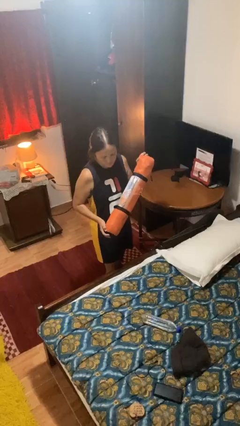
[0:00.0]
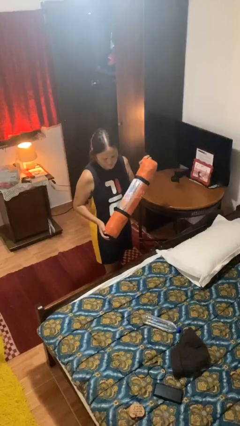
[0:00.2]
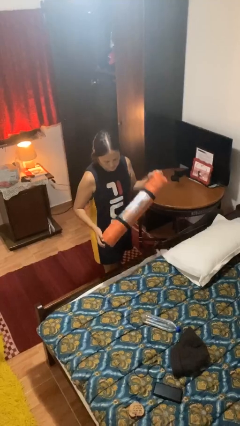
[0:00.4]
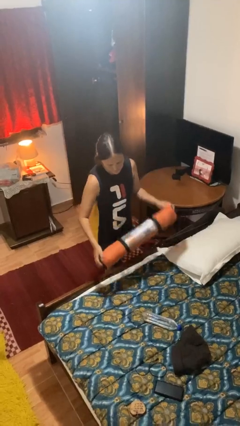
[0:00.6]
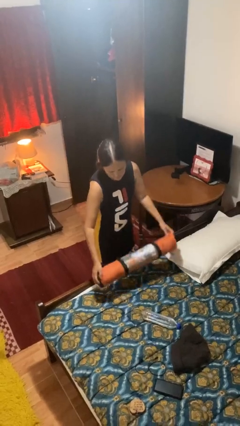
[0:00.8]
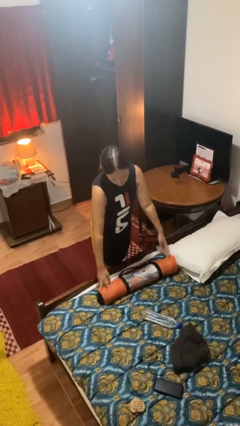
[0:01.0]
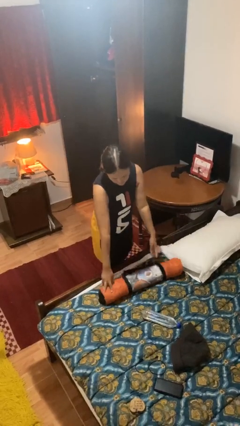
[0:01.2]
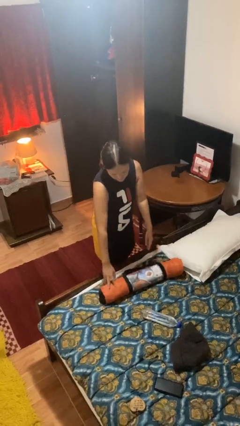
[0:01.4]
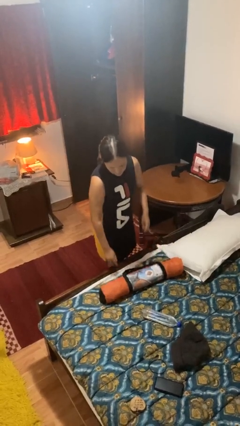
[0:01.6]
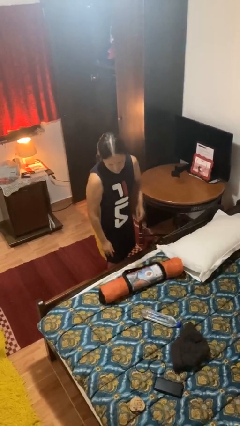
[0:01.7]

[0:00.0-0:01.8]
person puts down object on bed

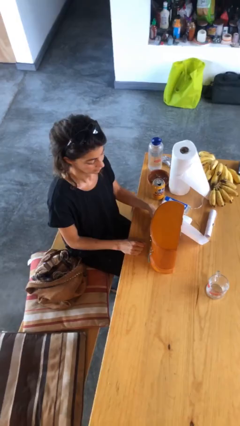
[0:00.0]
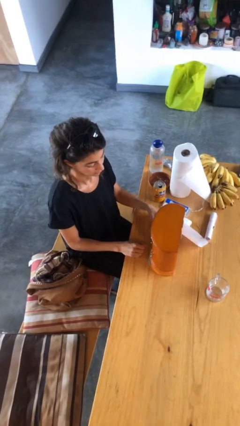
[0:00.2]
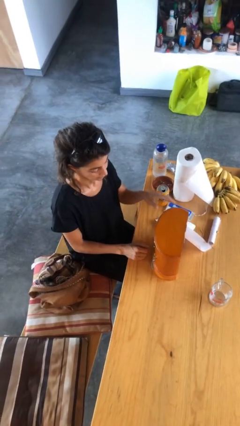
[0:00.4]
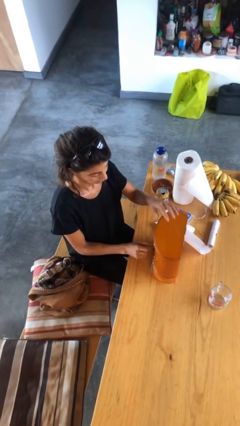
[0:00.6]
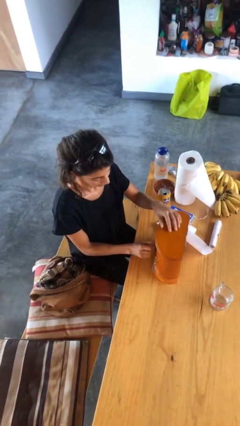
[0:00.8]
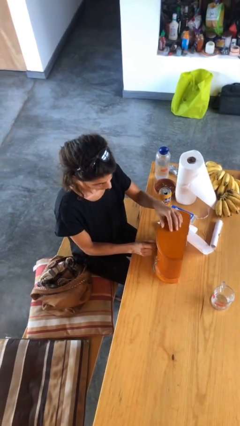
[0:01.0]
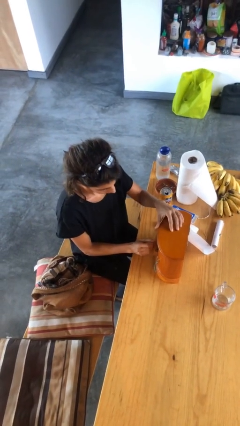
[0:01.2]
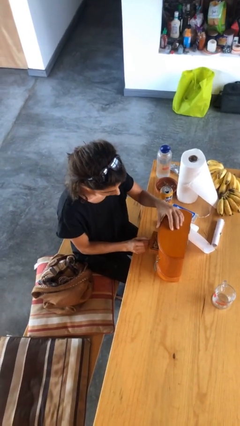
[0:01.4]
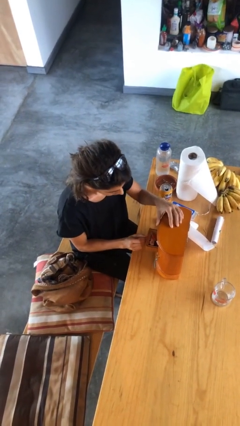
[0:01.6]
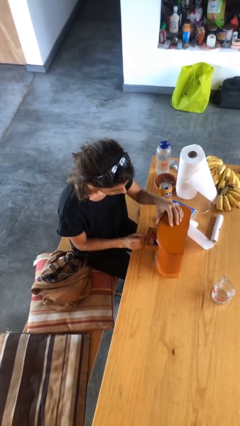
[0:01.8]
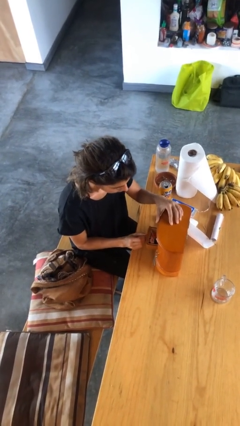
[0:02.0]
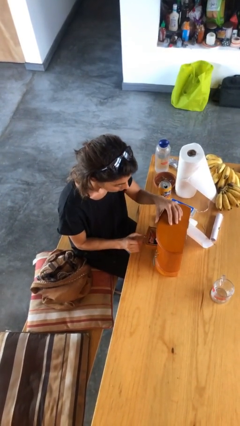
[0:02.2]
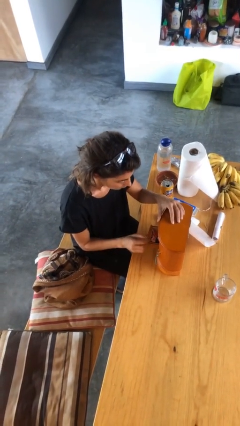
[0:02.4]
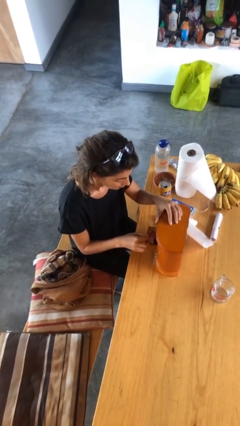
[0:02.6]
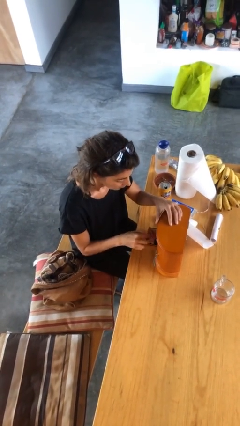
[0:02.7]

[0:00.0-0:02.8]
person opens jewelry box

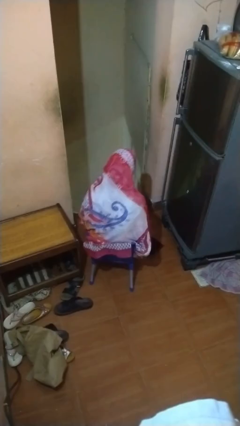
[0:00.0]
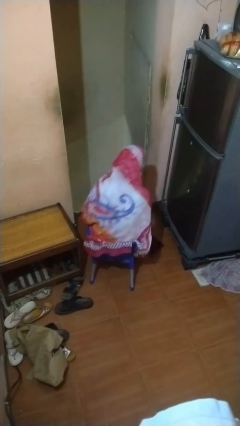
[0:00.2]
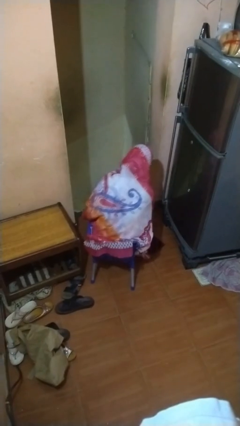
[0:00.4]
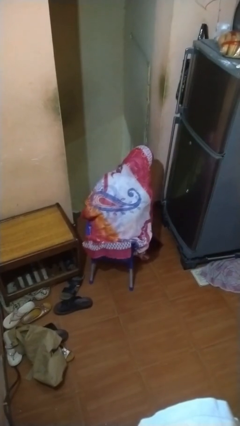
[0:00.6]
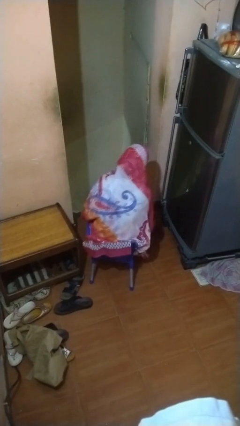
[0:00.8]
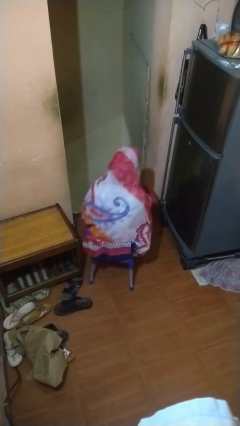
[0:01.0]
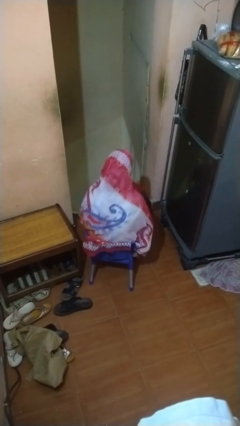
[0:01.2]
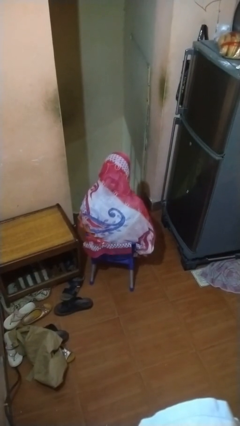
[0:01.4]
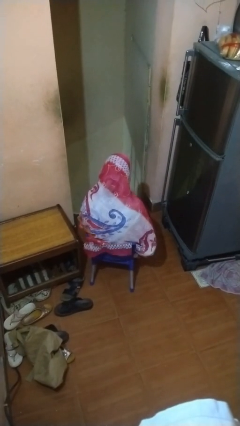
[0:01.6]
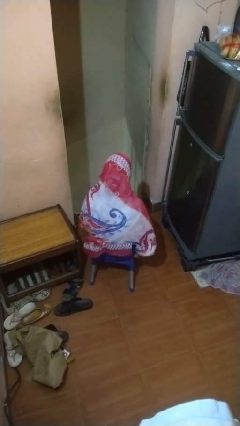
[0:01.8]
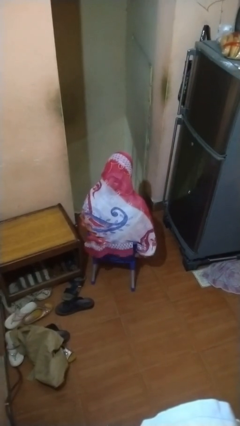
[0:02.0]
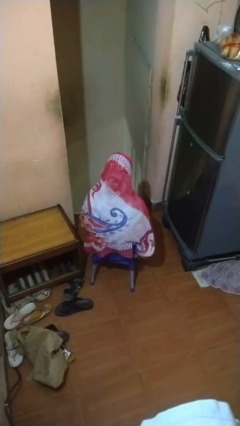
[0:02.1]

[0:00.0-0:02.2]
person picks up object from floor

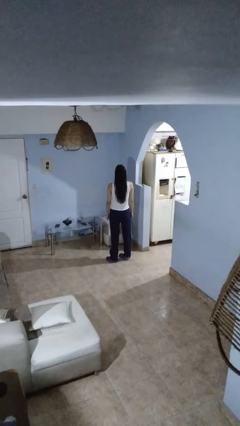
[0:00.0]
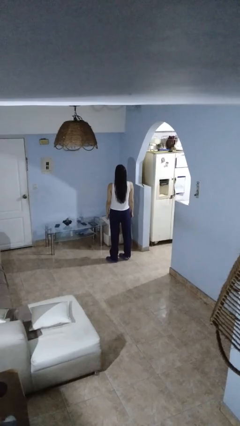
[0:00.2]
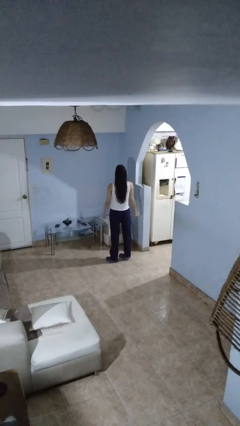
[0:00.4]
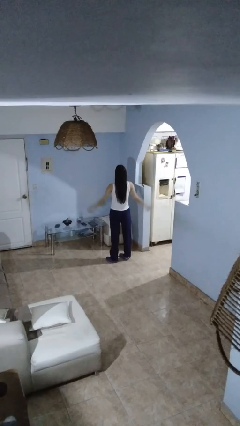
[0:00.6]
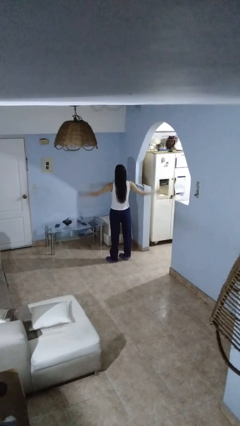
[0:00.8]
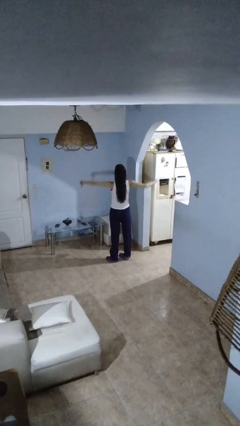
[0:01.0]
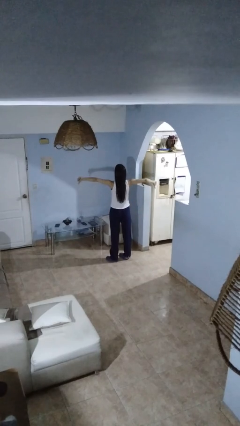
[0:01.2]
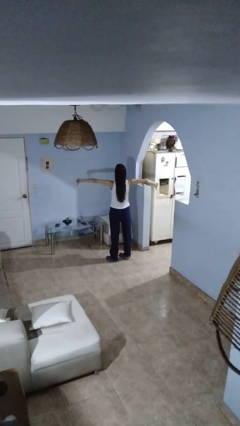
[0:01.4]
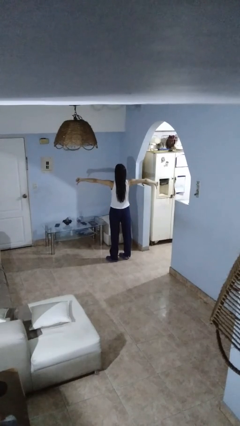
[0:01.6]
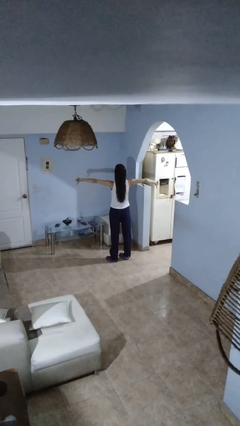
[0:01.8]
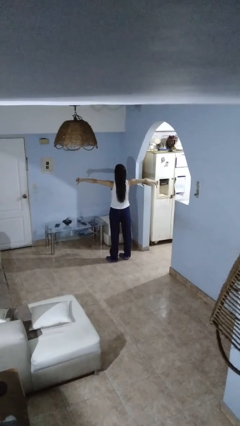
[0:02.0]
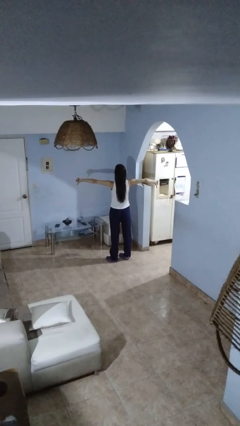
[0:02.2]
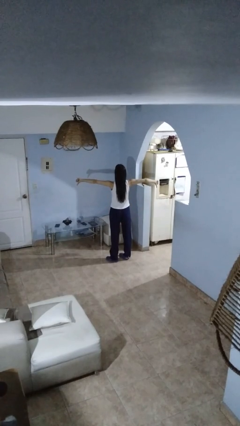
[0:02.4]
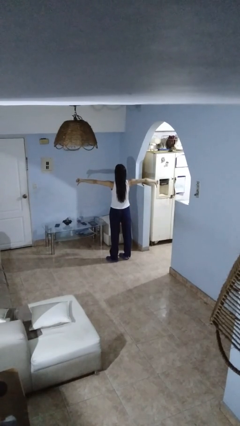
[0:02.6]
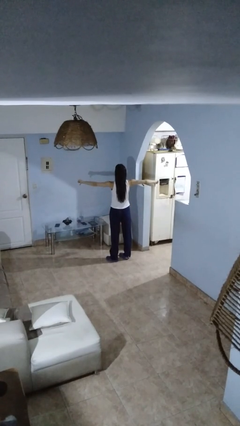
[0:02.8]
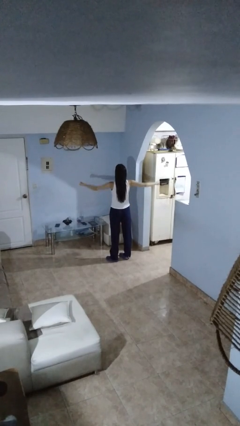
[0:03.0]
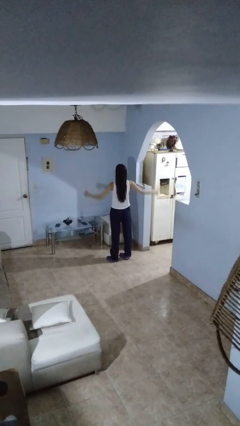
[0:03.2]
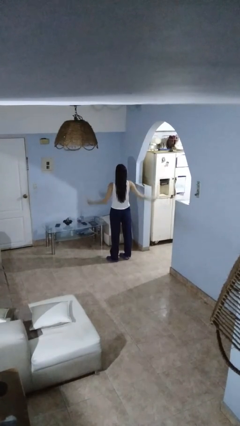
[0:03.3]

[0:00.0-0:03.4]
person gestures thumbs down

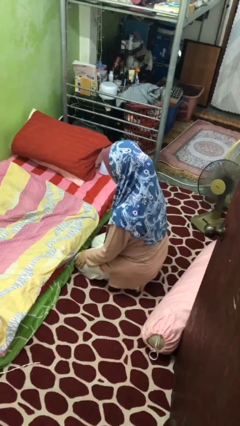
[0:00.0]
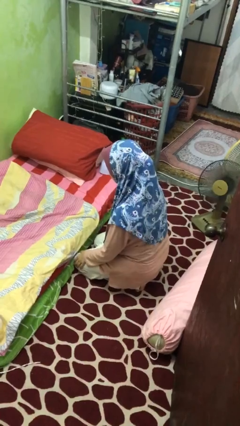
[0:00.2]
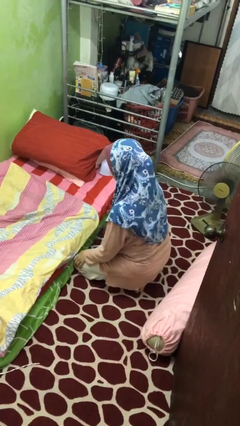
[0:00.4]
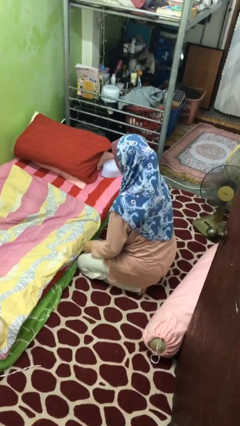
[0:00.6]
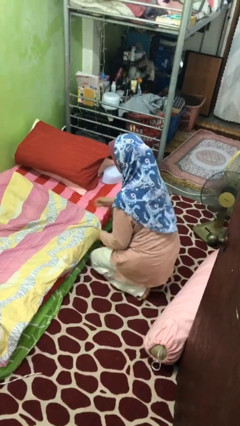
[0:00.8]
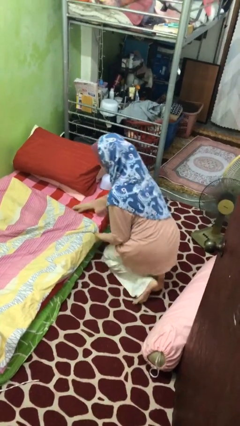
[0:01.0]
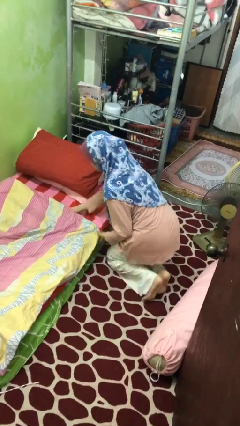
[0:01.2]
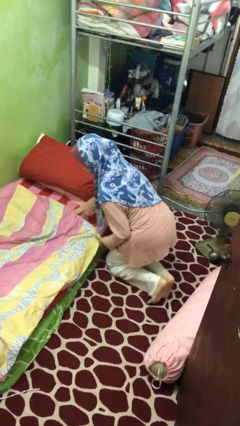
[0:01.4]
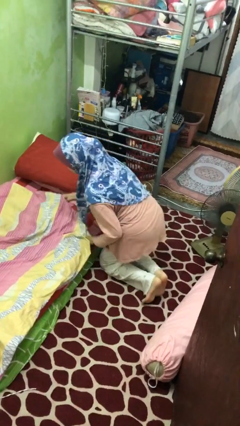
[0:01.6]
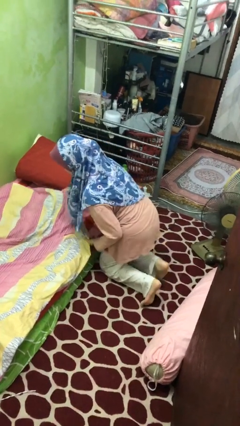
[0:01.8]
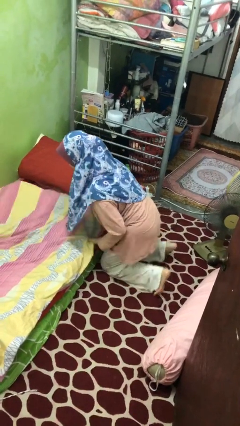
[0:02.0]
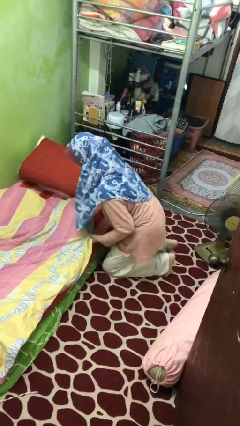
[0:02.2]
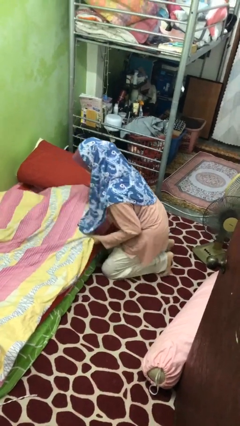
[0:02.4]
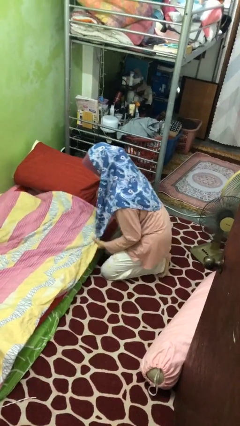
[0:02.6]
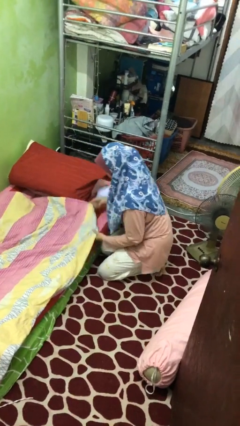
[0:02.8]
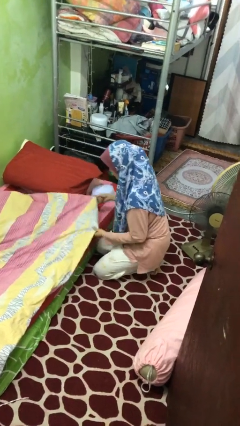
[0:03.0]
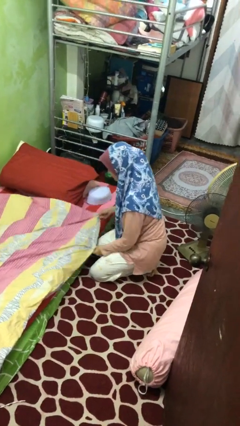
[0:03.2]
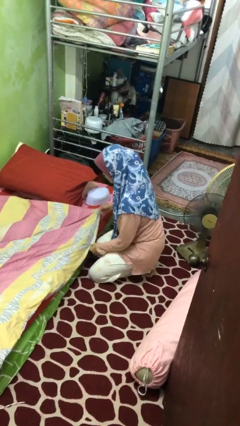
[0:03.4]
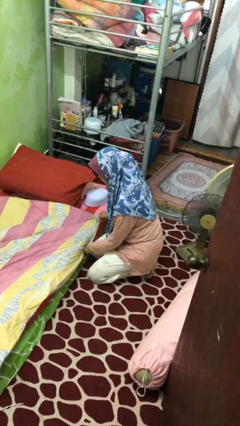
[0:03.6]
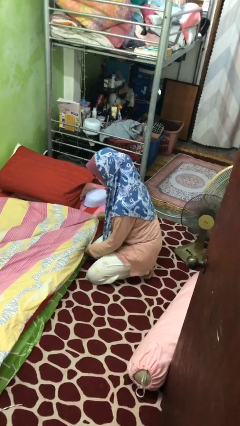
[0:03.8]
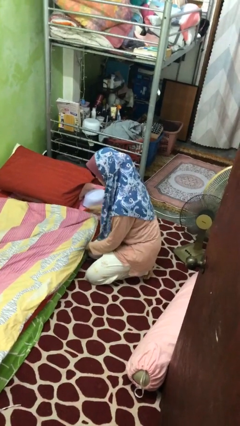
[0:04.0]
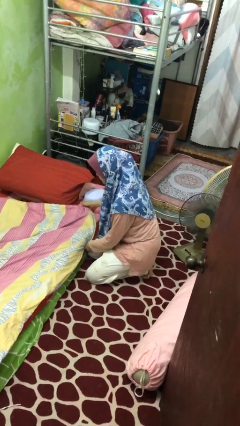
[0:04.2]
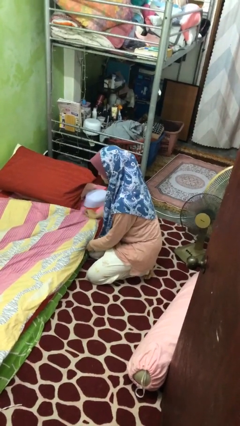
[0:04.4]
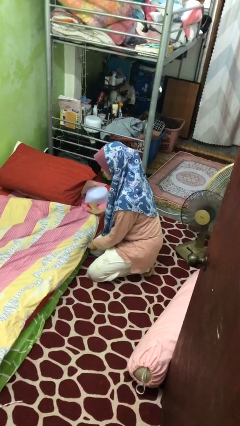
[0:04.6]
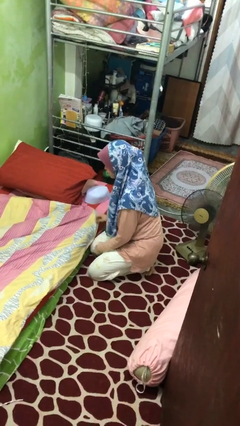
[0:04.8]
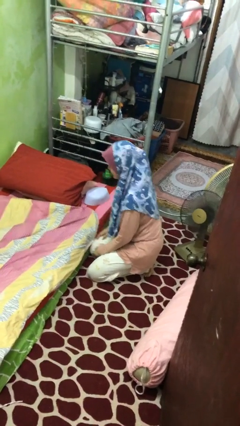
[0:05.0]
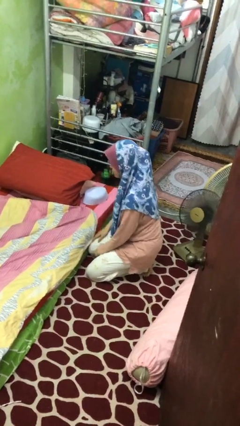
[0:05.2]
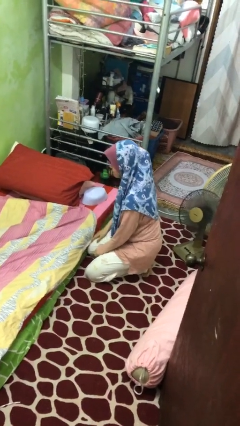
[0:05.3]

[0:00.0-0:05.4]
person makes bed

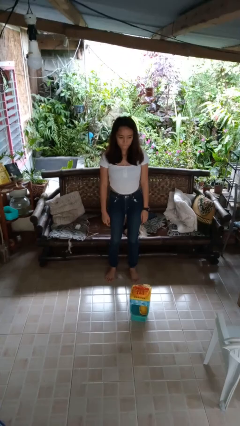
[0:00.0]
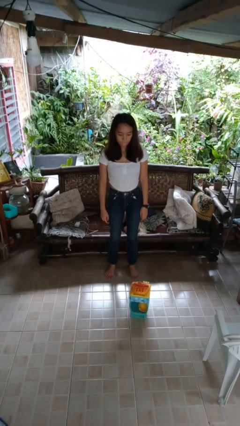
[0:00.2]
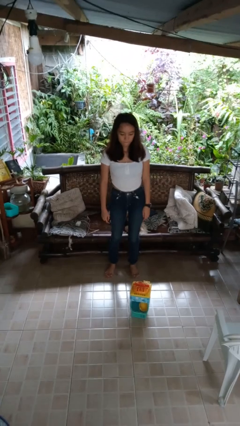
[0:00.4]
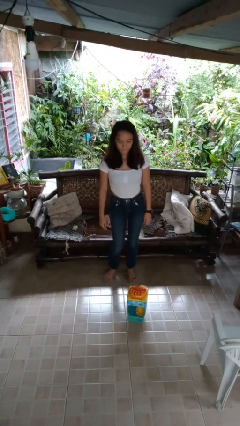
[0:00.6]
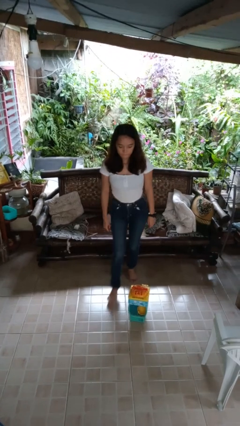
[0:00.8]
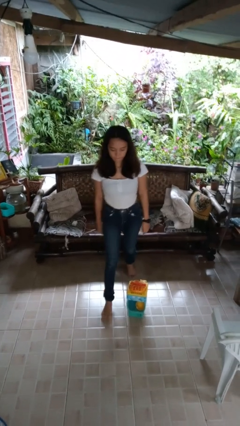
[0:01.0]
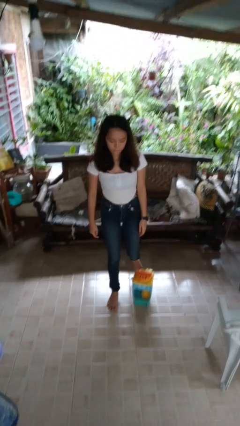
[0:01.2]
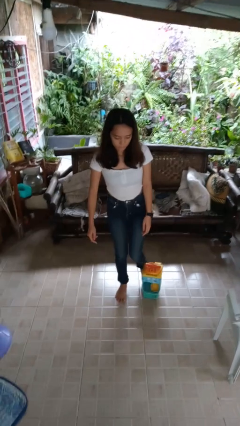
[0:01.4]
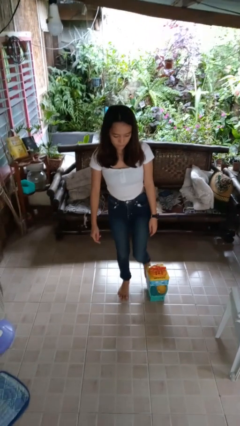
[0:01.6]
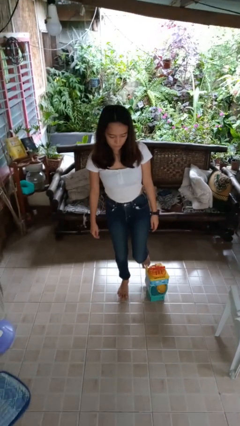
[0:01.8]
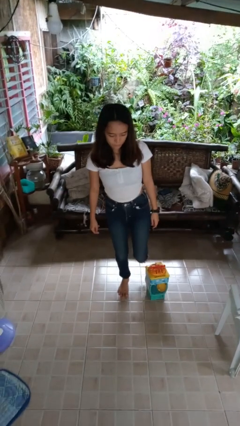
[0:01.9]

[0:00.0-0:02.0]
person trips on object on floor
